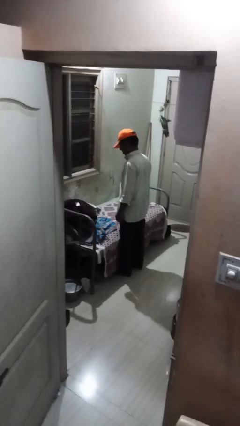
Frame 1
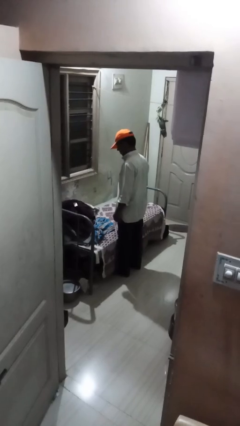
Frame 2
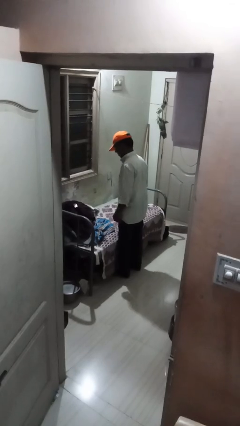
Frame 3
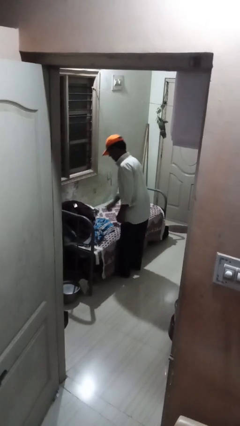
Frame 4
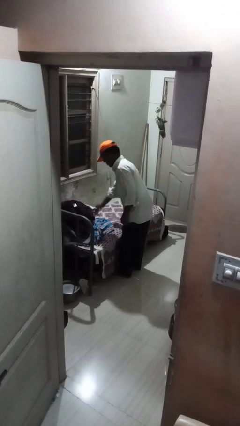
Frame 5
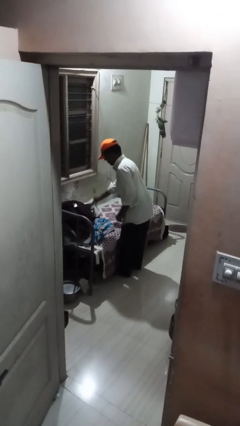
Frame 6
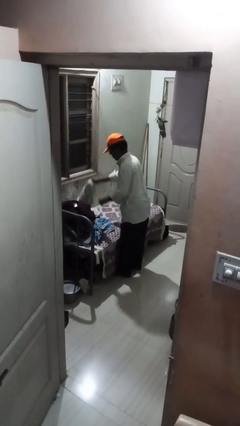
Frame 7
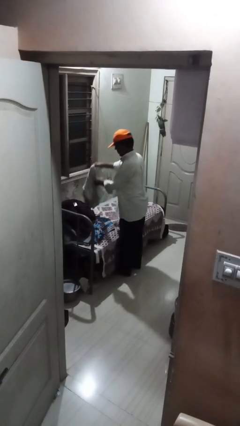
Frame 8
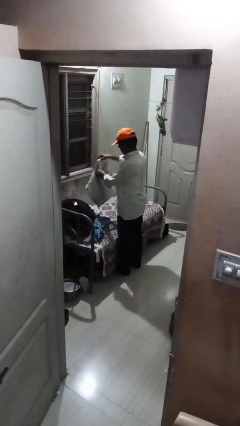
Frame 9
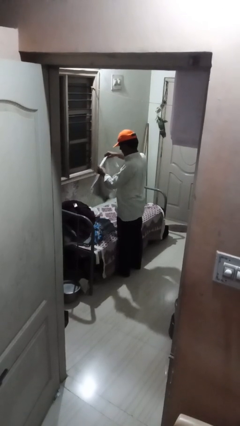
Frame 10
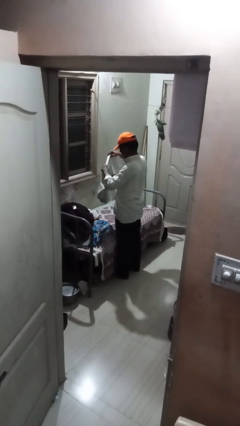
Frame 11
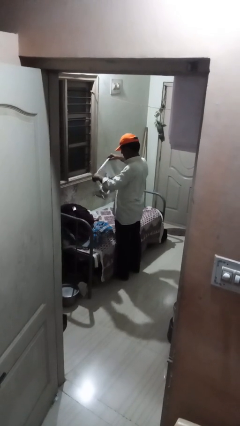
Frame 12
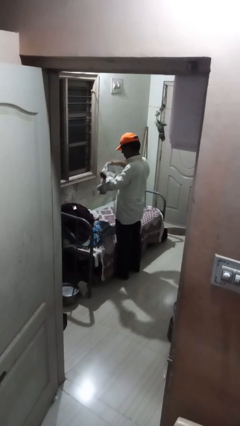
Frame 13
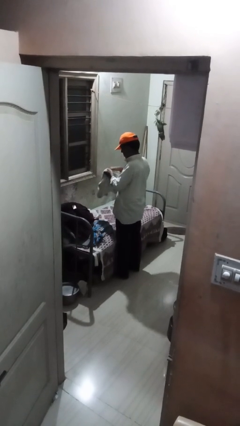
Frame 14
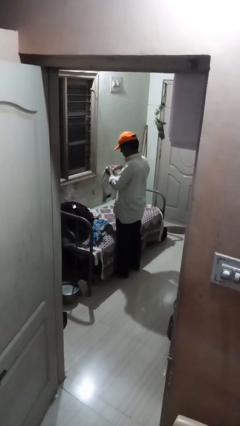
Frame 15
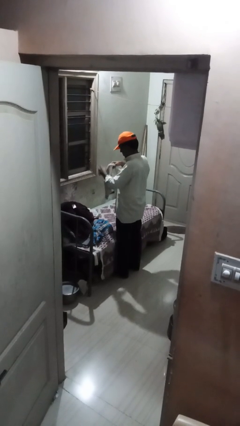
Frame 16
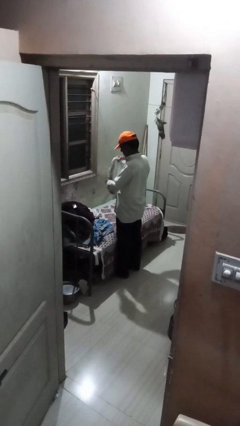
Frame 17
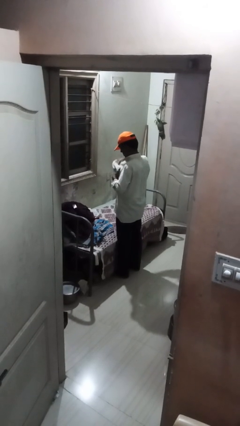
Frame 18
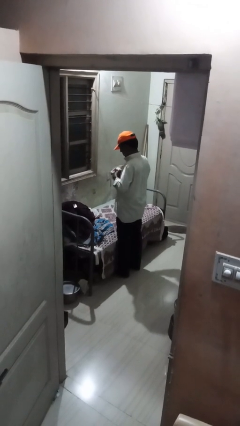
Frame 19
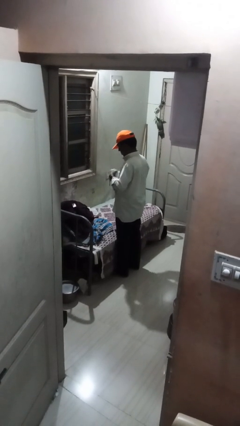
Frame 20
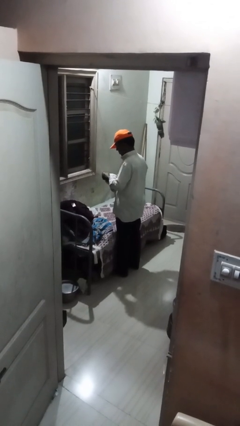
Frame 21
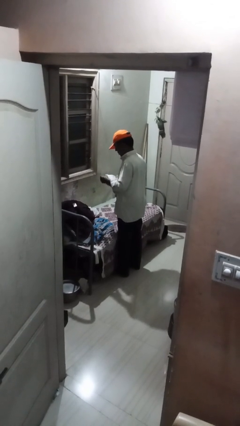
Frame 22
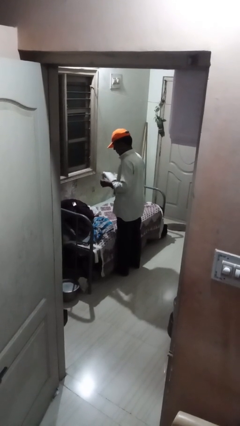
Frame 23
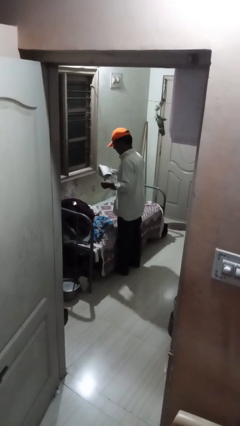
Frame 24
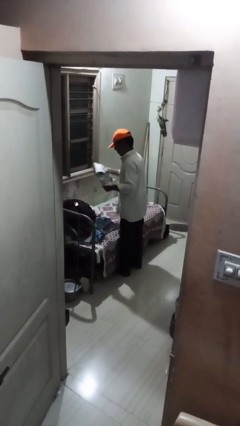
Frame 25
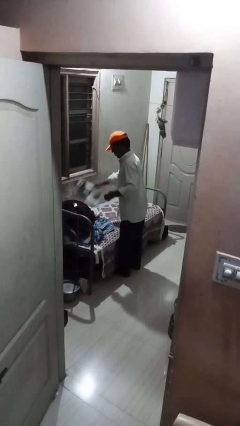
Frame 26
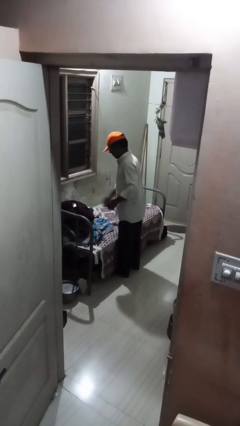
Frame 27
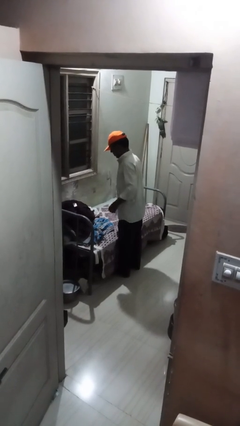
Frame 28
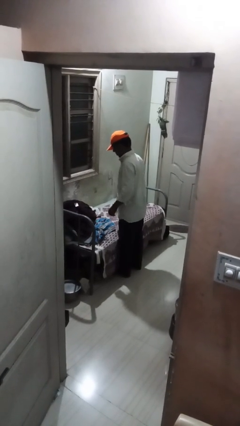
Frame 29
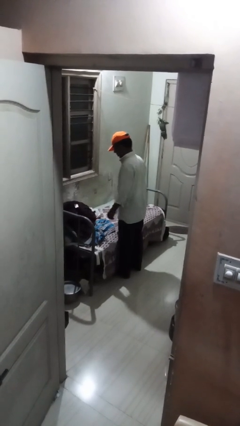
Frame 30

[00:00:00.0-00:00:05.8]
person folds shirt

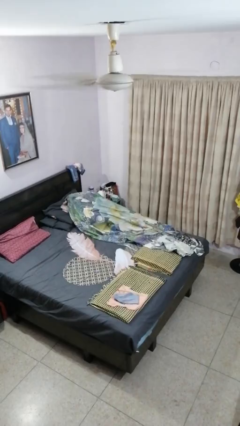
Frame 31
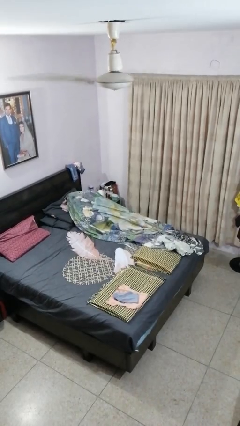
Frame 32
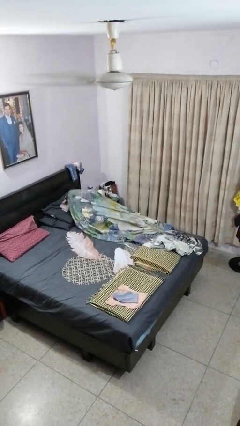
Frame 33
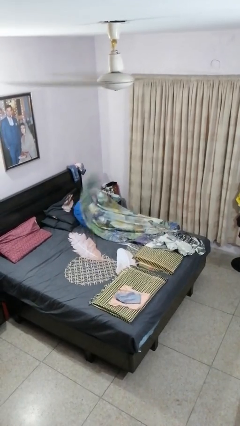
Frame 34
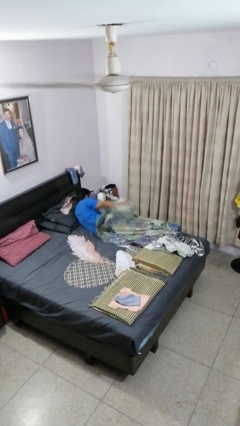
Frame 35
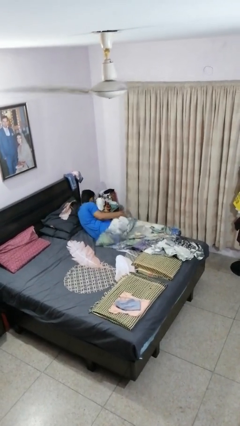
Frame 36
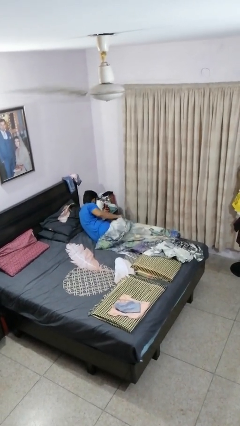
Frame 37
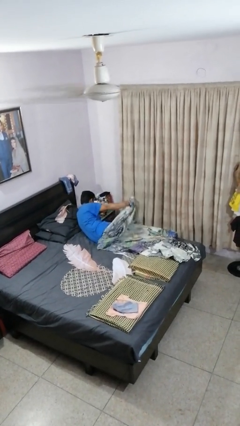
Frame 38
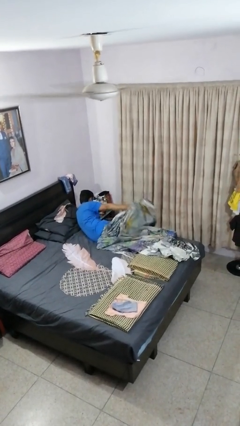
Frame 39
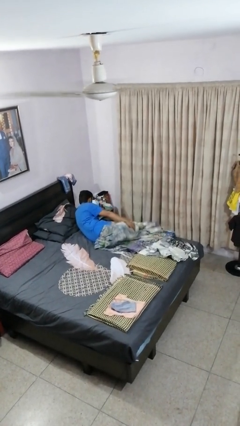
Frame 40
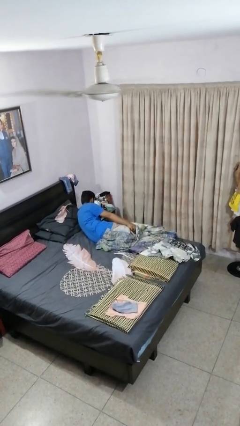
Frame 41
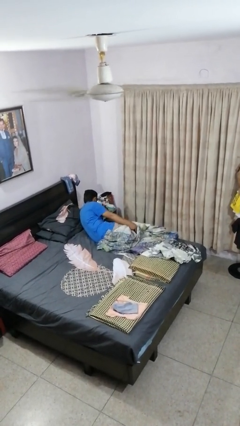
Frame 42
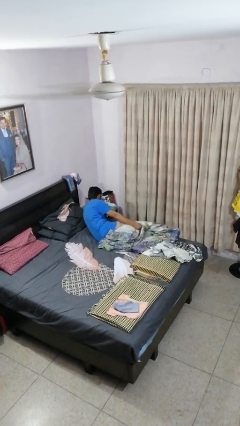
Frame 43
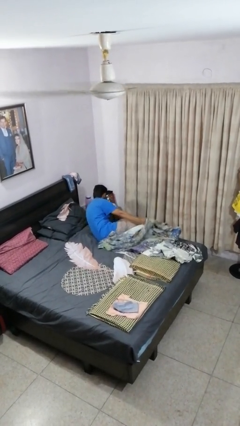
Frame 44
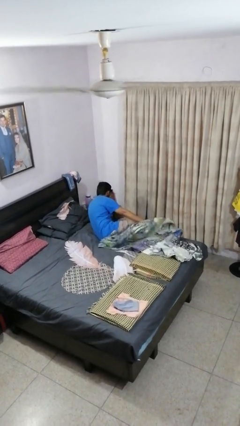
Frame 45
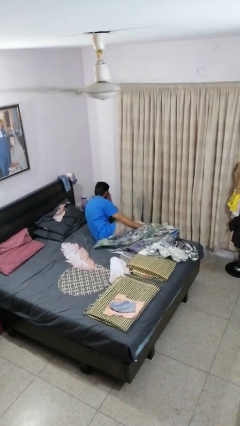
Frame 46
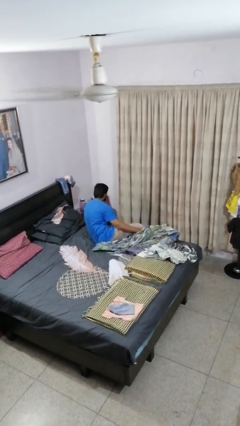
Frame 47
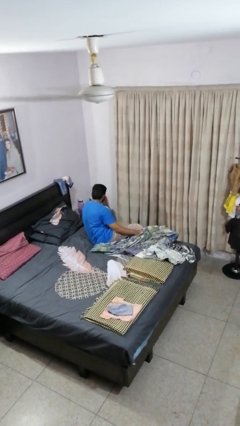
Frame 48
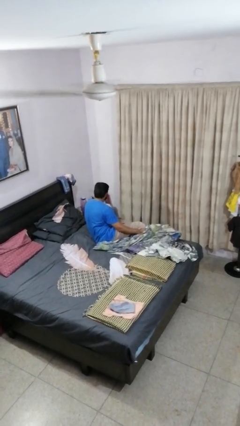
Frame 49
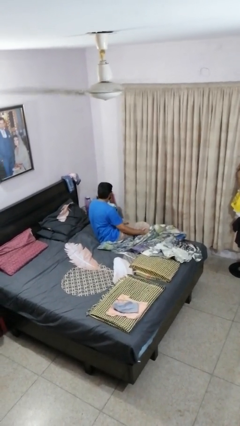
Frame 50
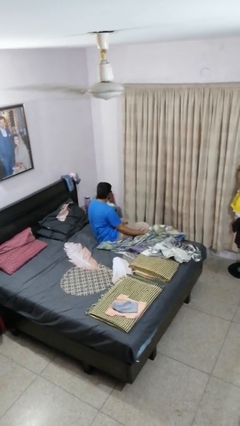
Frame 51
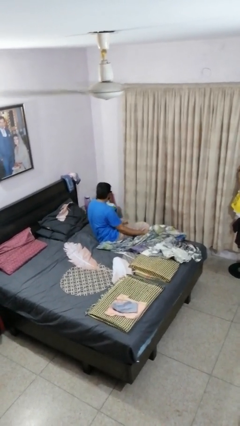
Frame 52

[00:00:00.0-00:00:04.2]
person uncovers with bedsheets

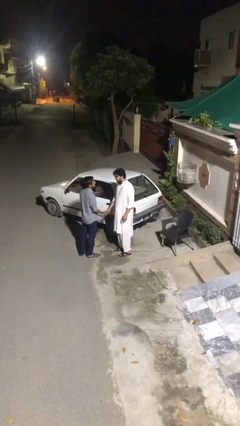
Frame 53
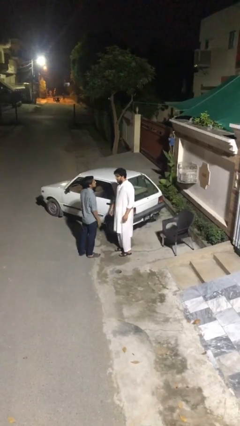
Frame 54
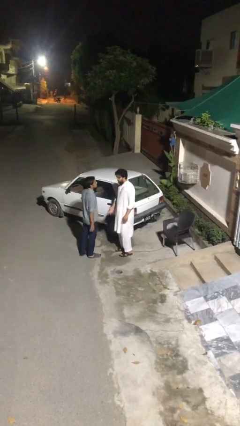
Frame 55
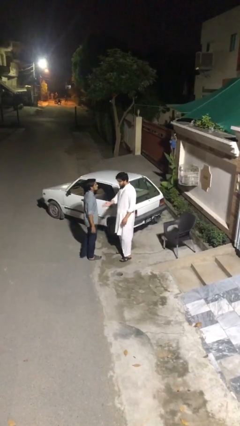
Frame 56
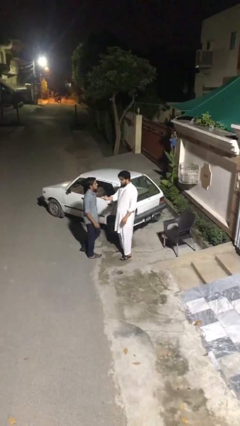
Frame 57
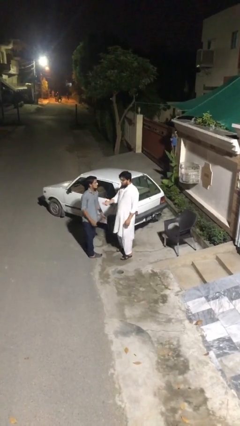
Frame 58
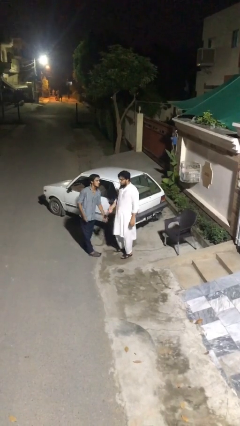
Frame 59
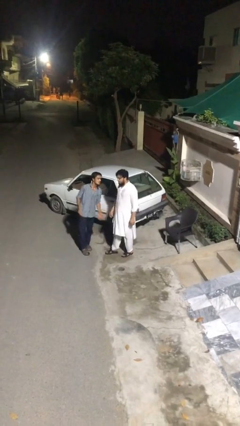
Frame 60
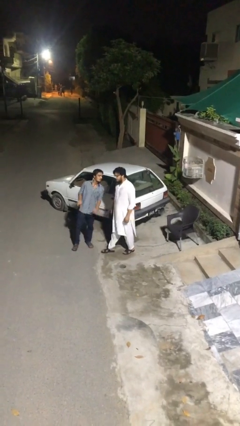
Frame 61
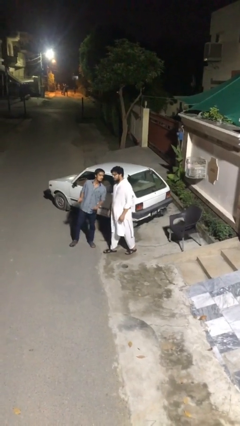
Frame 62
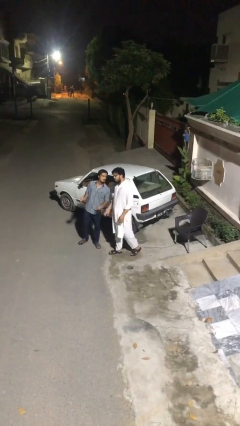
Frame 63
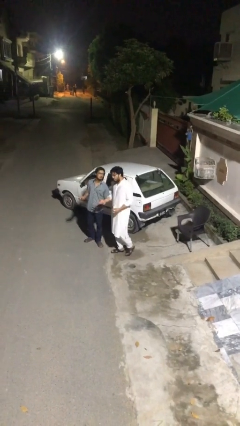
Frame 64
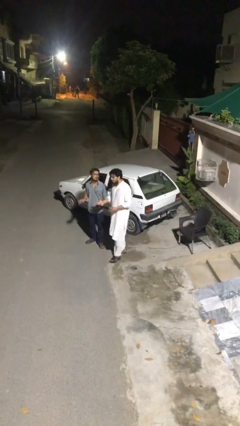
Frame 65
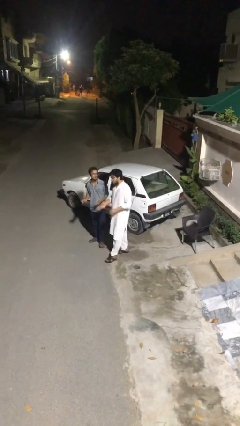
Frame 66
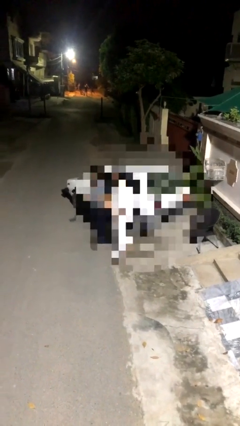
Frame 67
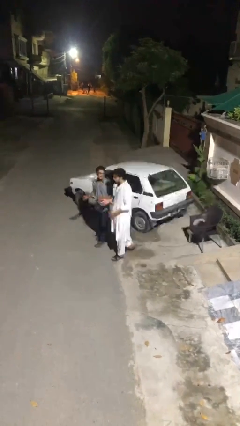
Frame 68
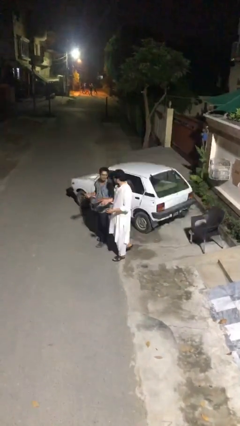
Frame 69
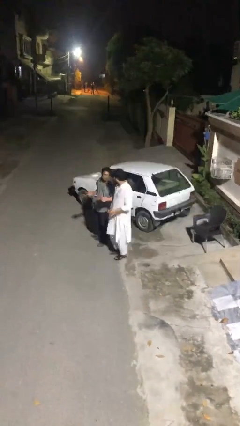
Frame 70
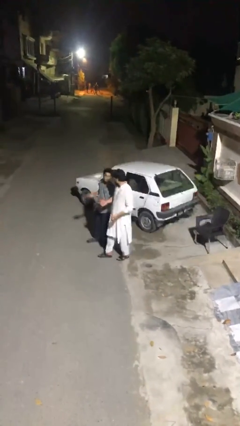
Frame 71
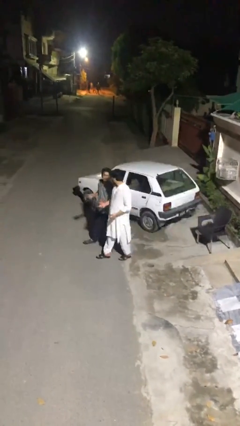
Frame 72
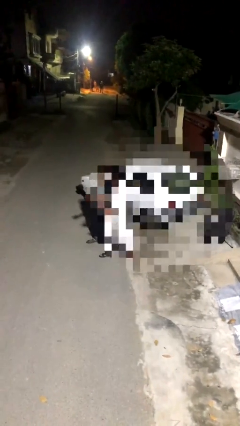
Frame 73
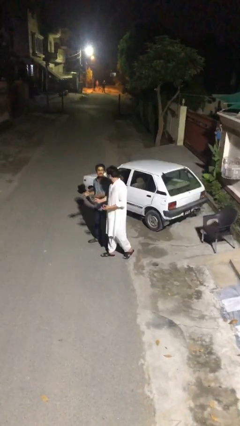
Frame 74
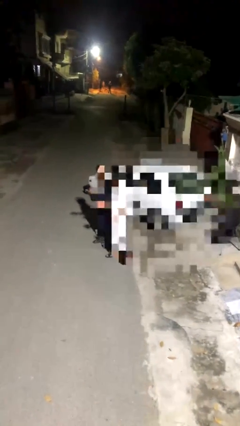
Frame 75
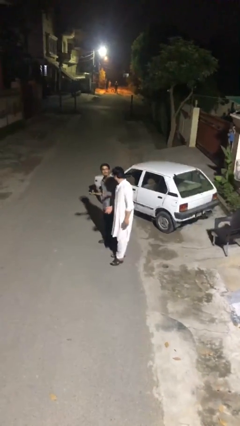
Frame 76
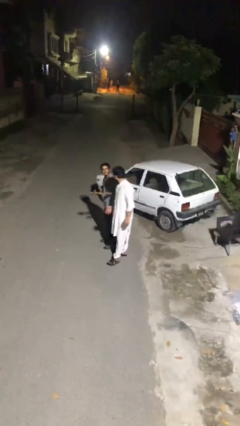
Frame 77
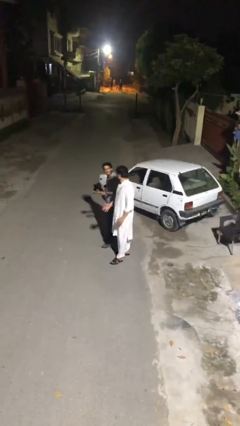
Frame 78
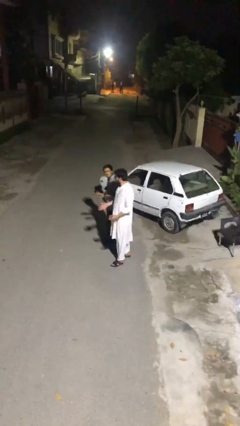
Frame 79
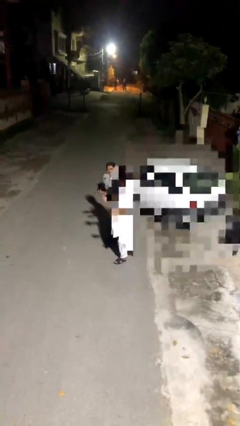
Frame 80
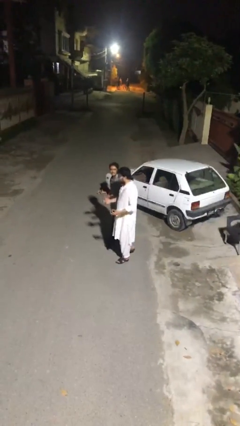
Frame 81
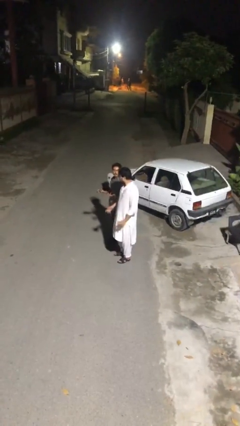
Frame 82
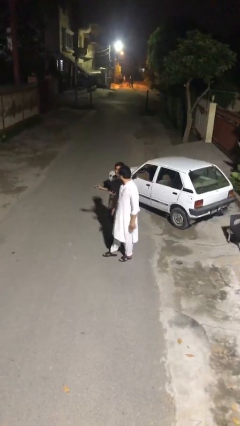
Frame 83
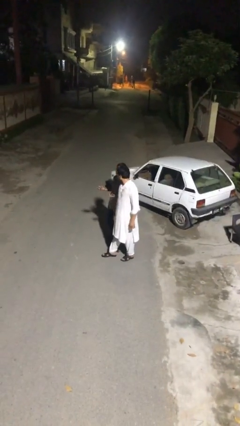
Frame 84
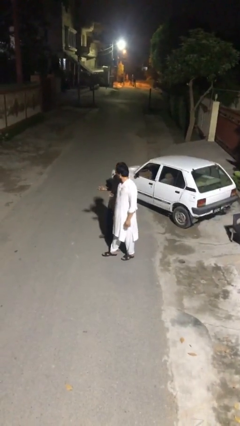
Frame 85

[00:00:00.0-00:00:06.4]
person talks to person

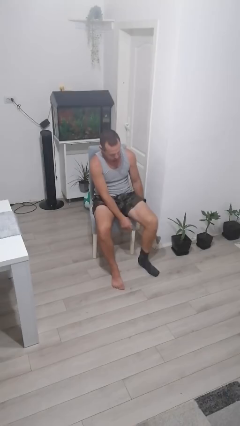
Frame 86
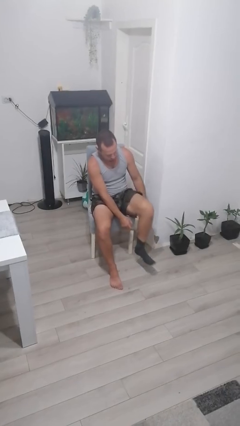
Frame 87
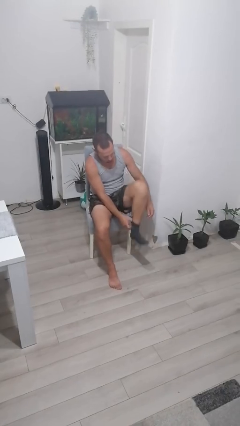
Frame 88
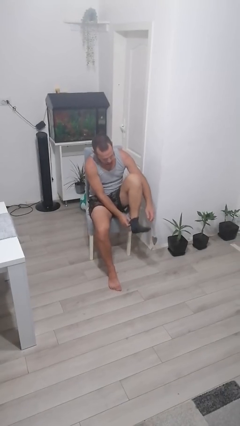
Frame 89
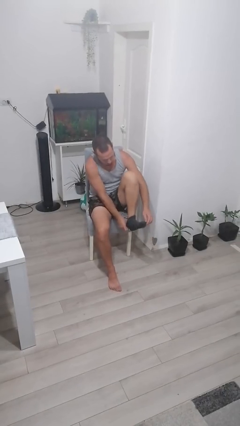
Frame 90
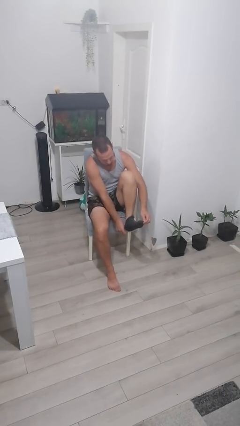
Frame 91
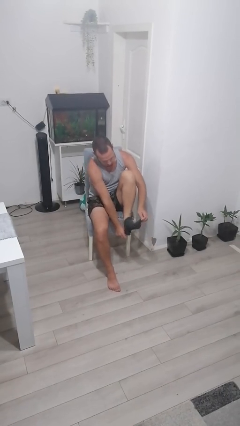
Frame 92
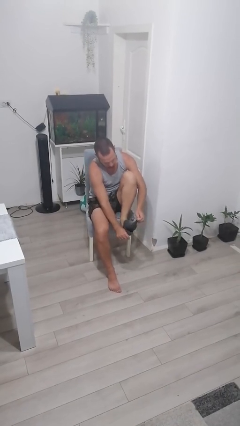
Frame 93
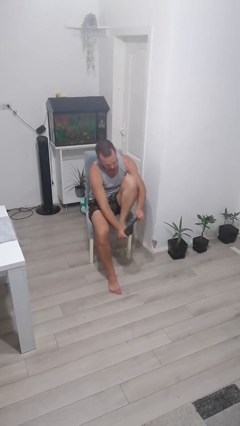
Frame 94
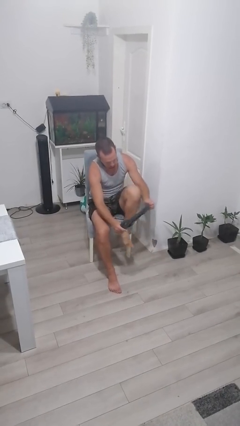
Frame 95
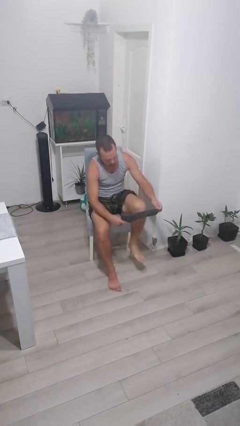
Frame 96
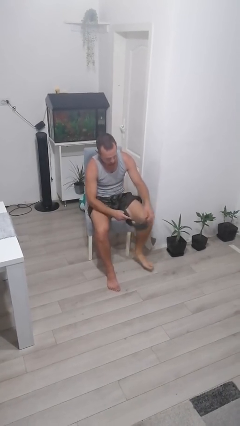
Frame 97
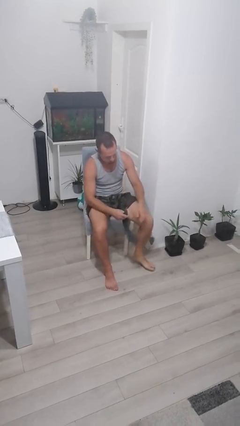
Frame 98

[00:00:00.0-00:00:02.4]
person takes off socks
